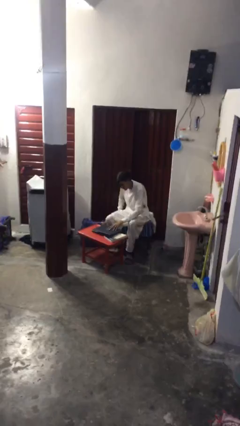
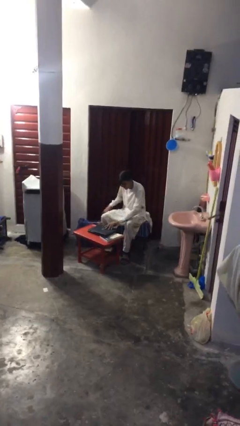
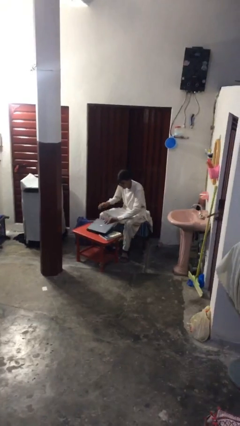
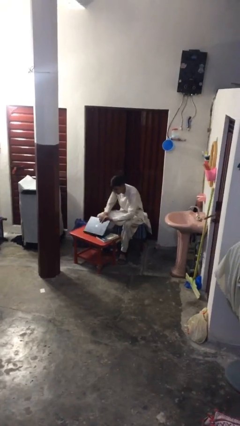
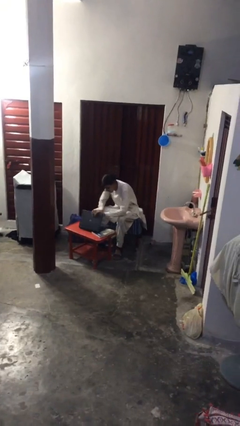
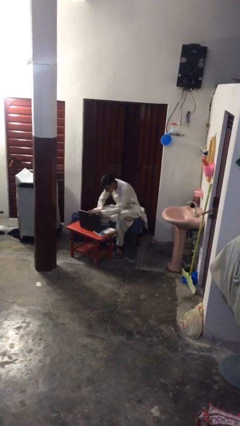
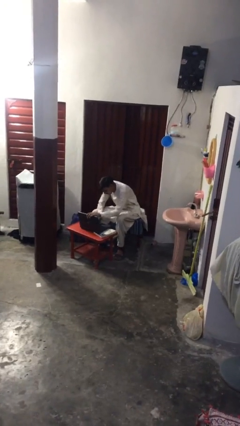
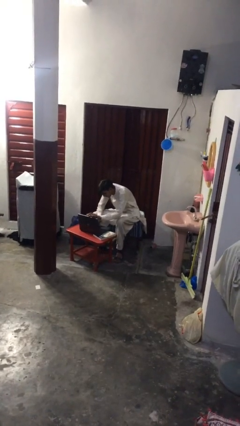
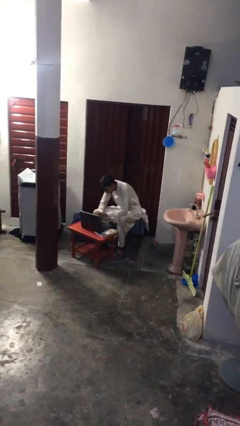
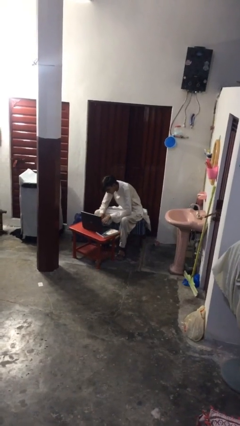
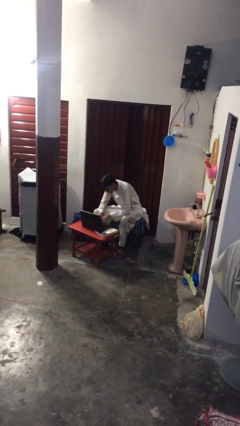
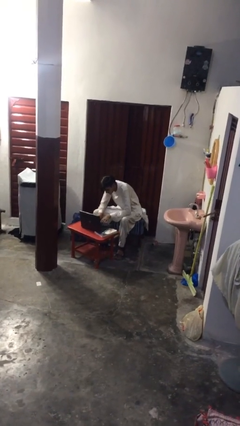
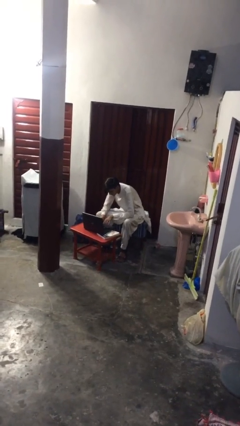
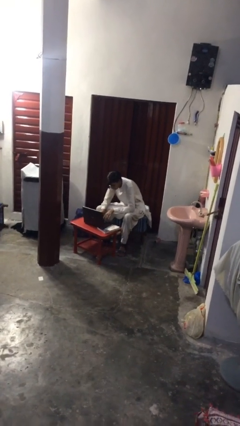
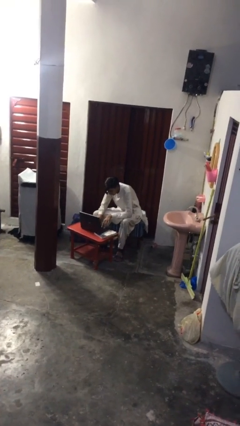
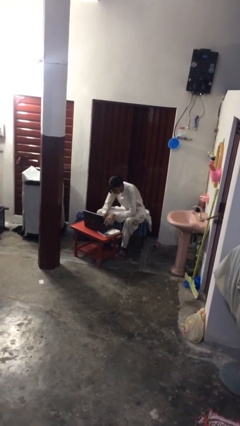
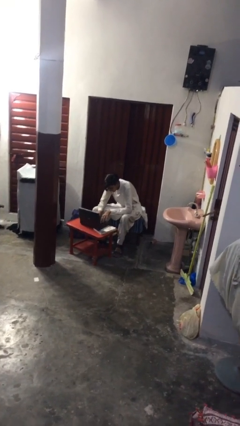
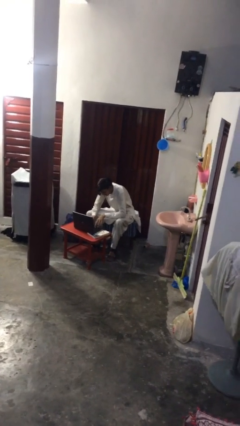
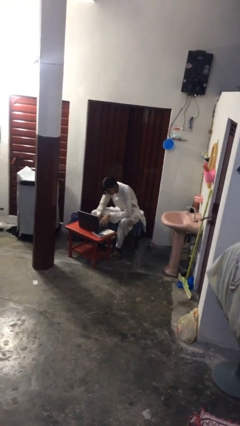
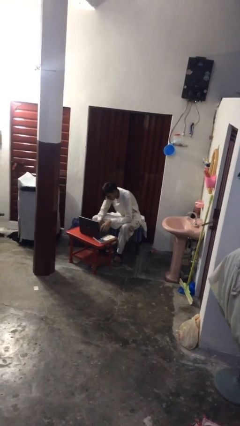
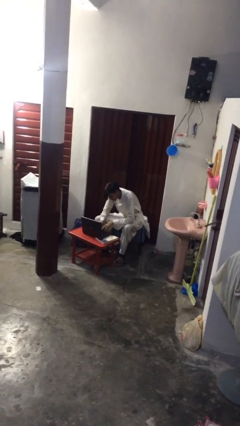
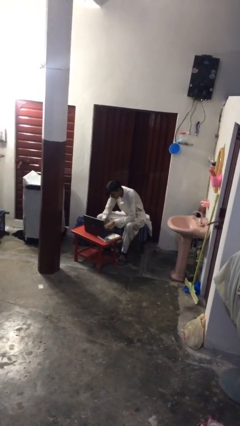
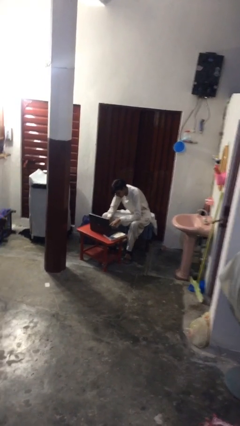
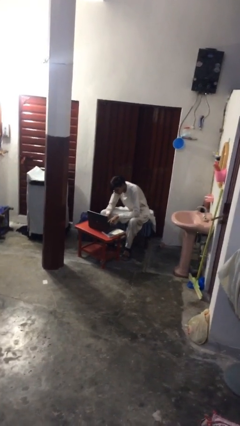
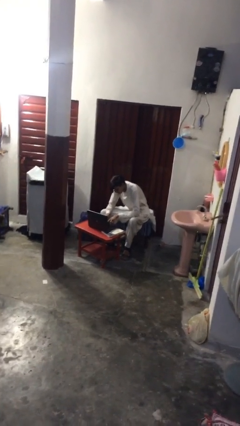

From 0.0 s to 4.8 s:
person interacts with laptop

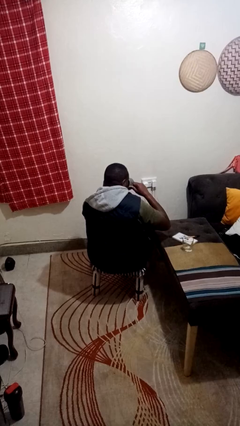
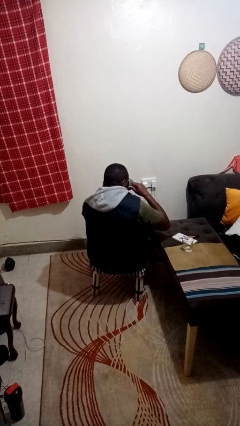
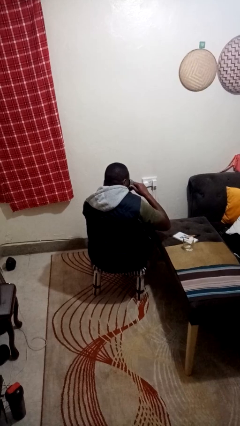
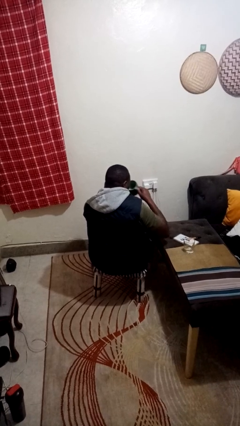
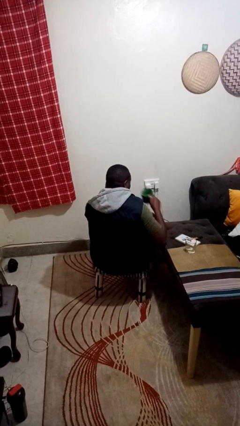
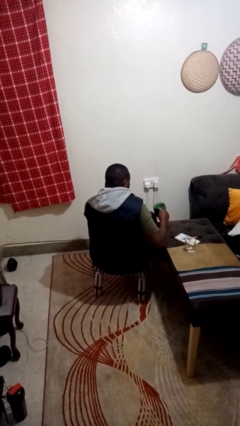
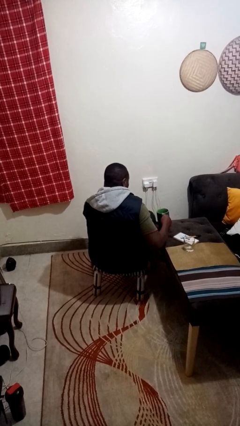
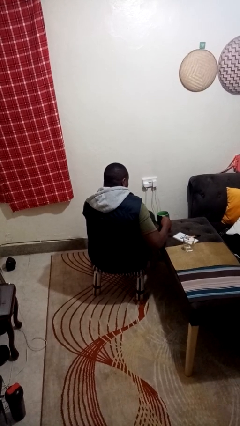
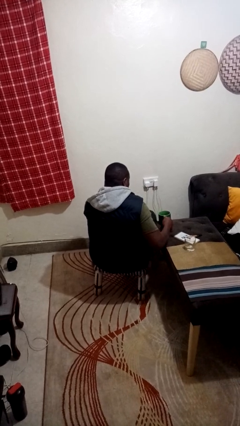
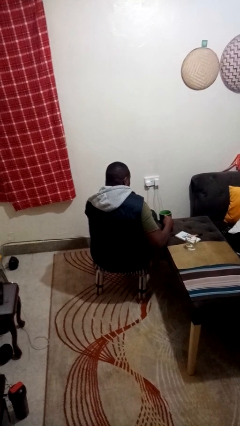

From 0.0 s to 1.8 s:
person puts down object on table

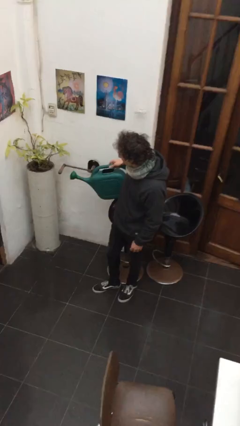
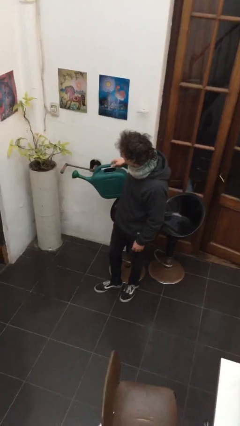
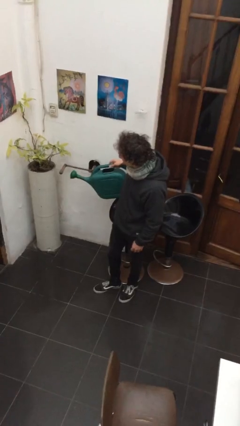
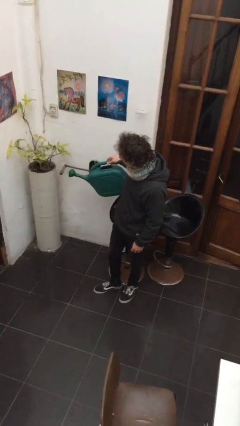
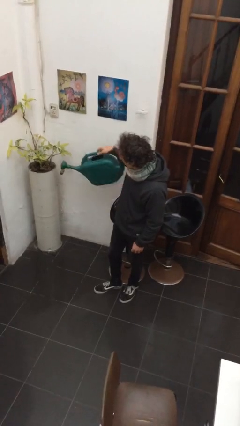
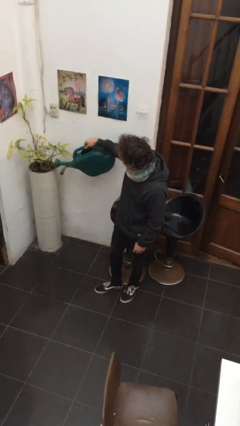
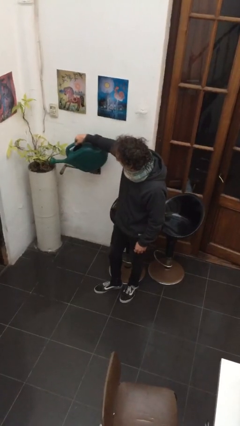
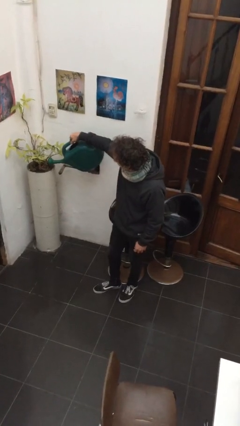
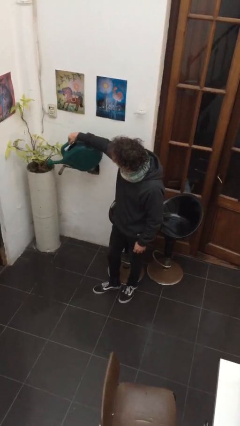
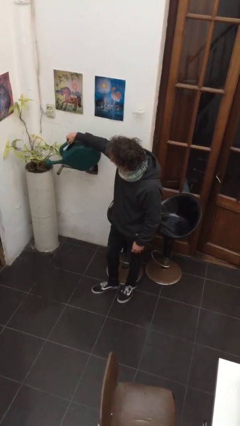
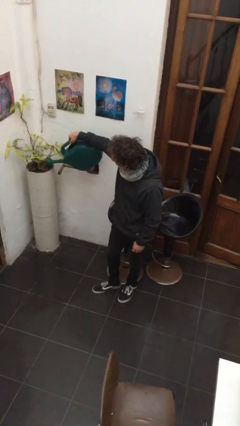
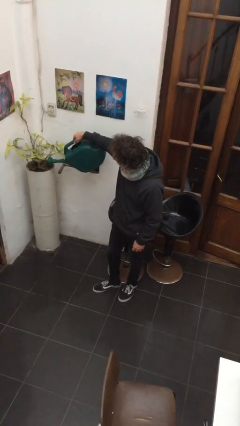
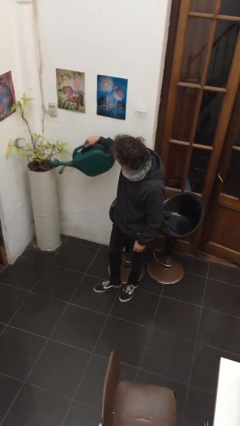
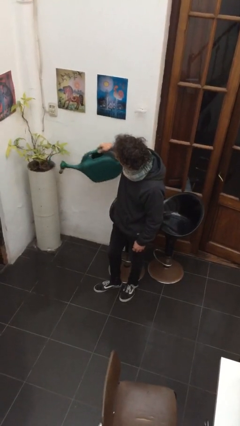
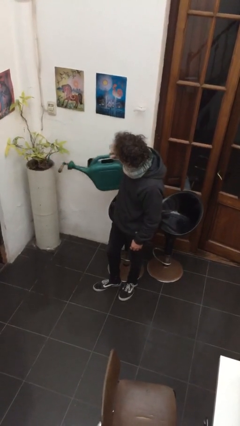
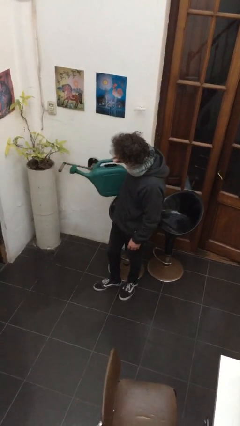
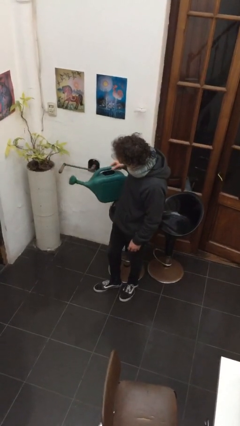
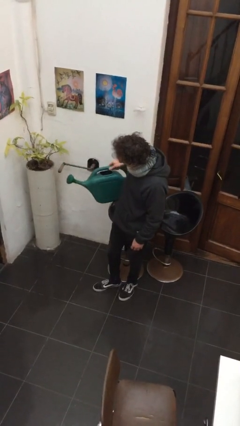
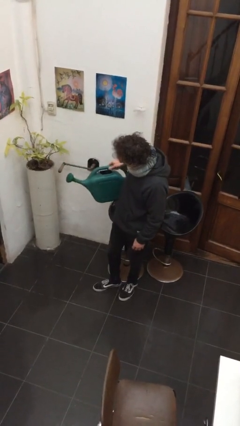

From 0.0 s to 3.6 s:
person waters houseplant

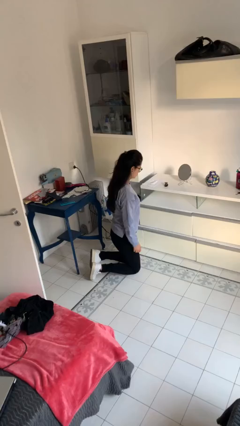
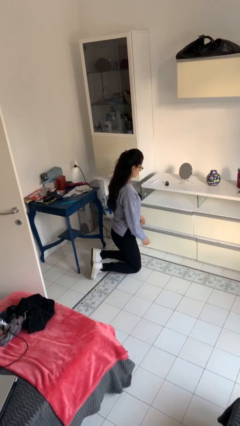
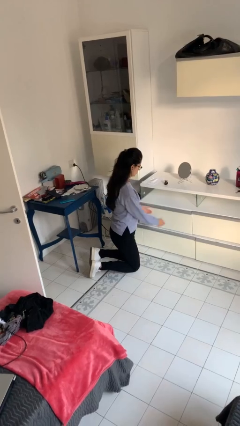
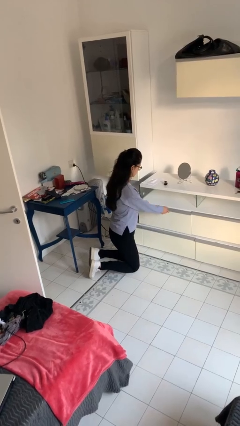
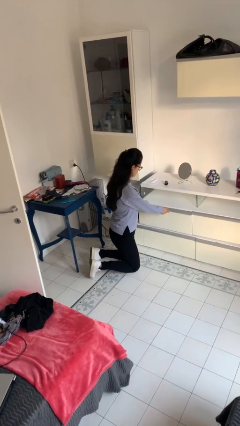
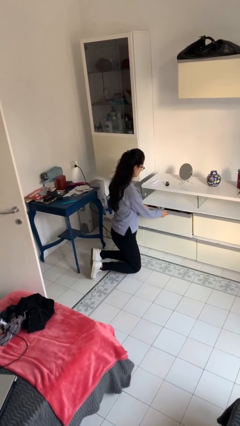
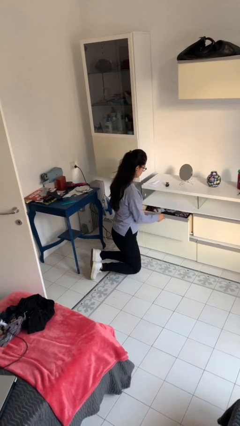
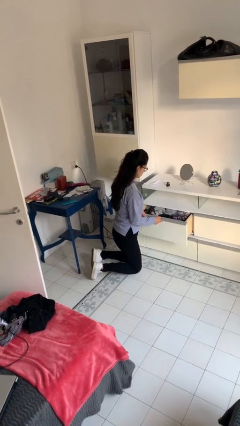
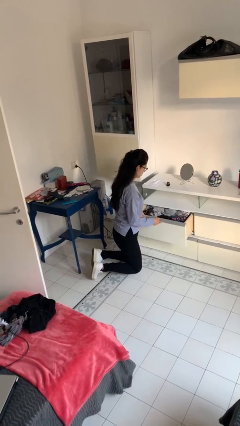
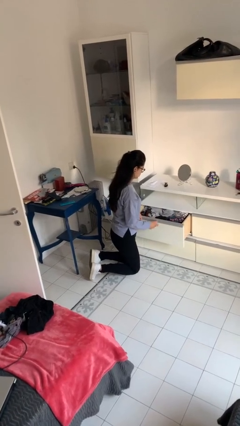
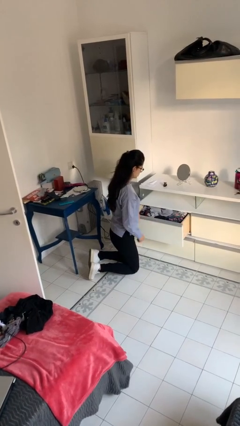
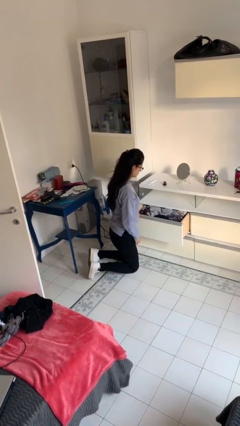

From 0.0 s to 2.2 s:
person opens dresser drawer

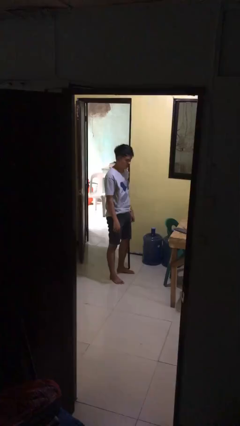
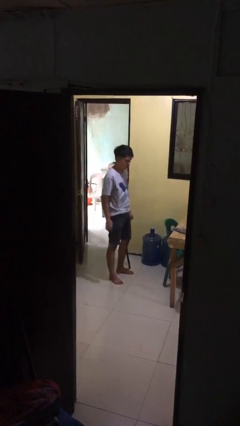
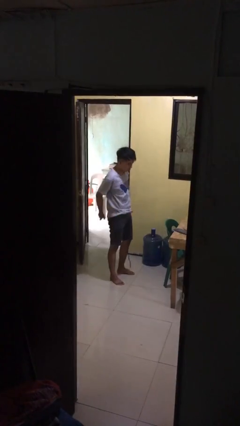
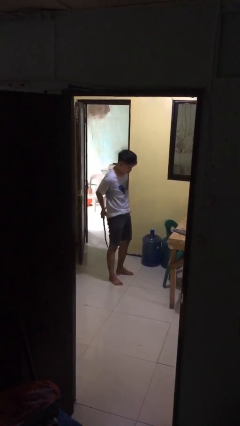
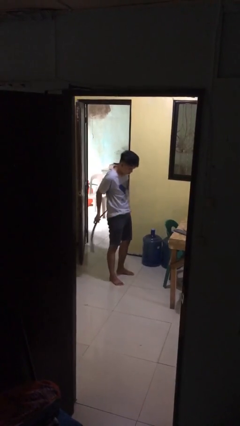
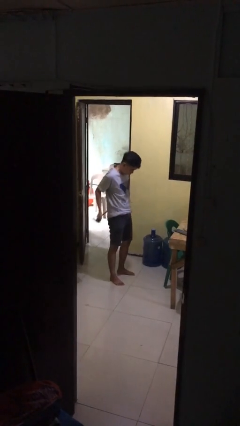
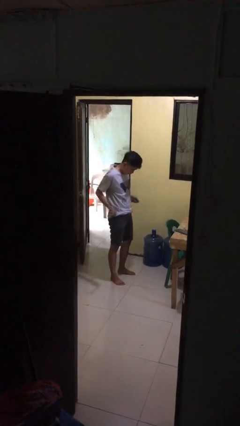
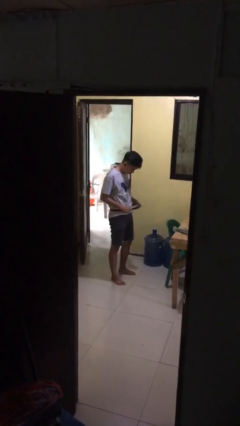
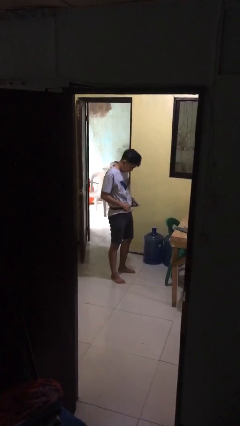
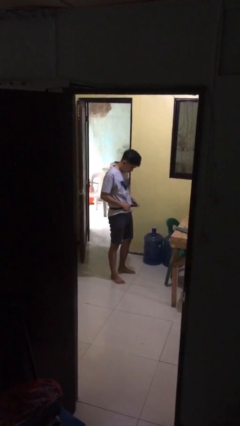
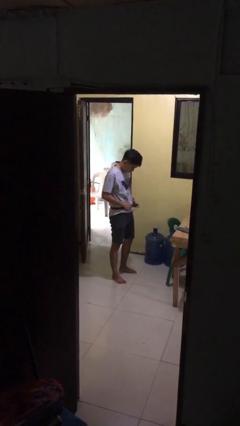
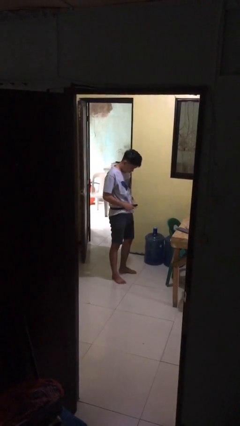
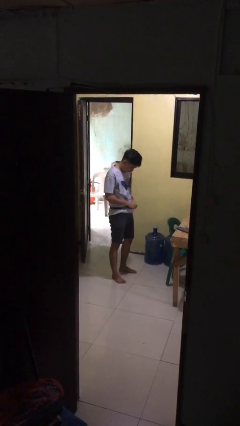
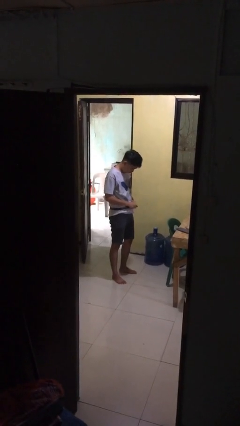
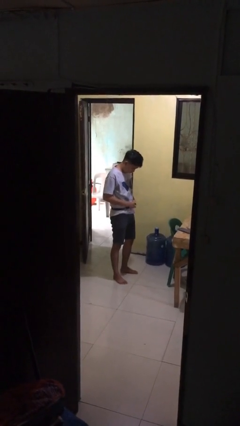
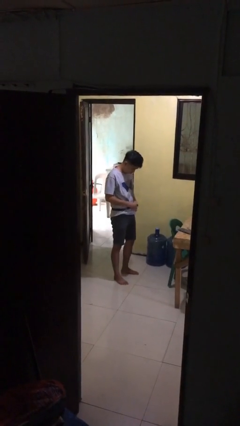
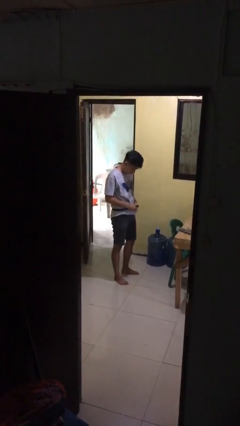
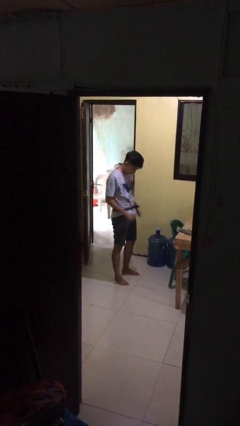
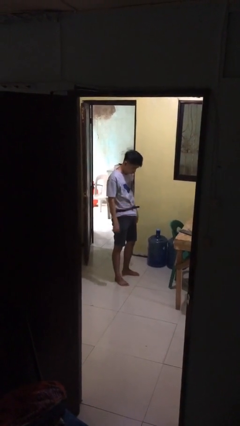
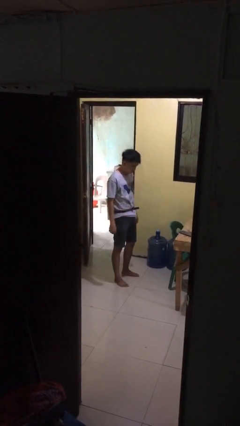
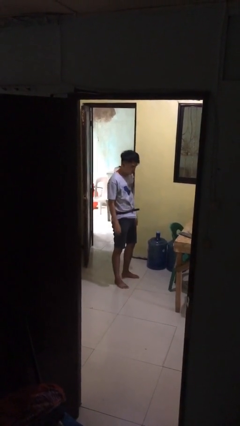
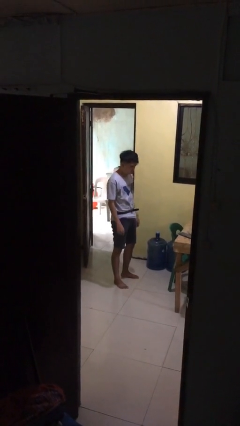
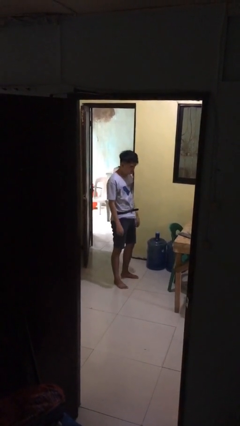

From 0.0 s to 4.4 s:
person puts on belt

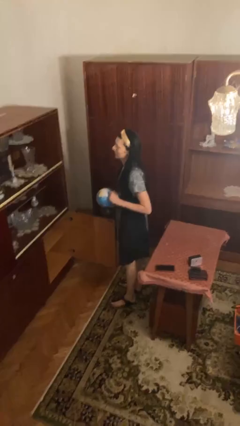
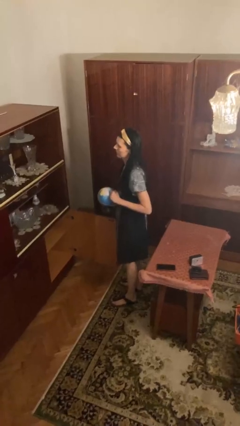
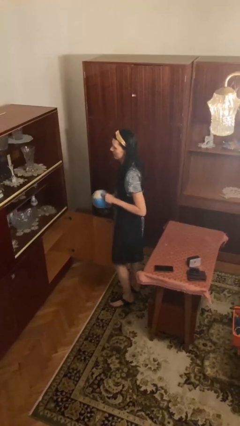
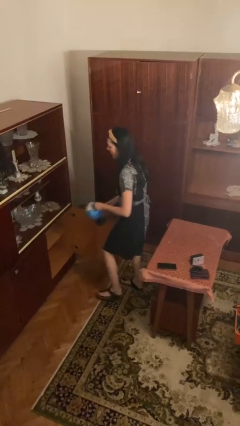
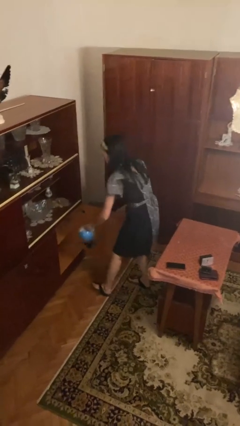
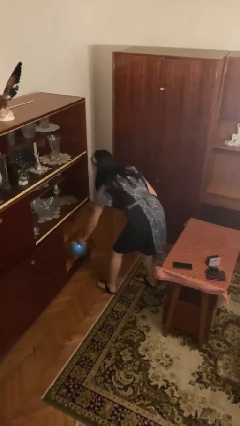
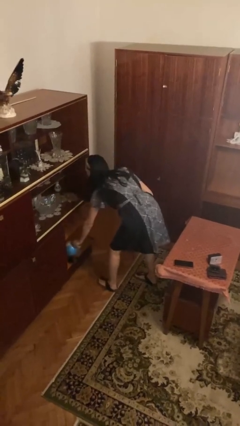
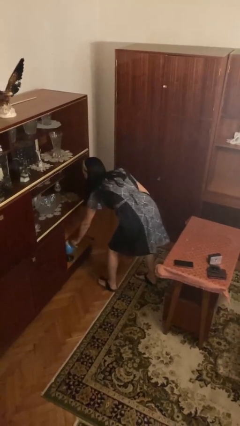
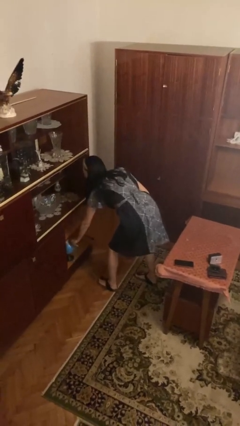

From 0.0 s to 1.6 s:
person puts down object into cabinet
